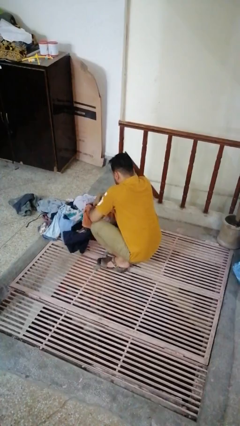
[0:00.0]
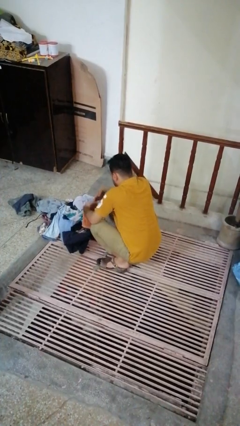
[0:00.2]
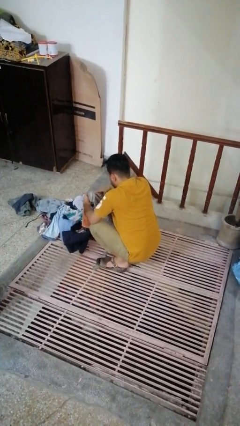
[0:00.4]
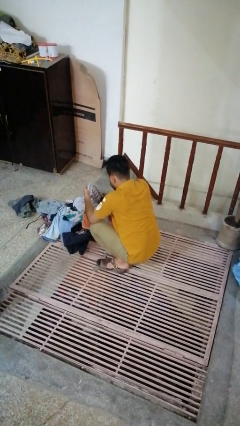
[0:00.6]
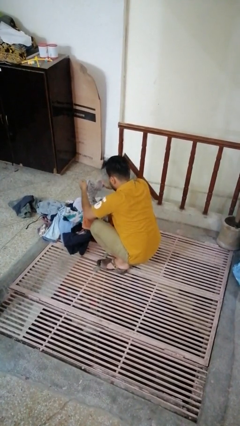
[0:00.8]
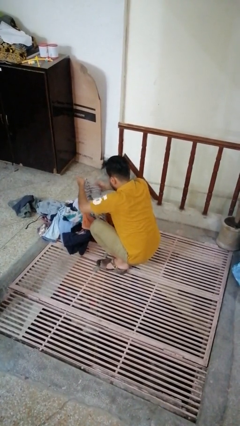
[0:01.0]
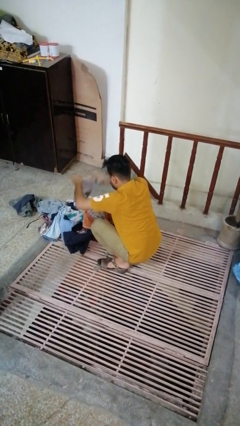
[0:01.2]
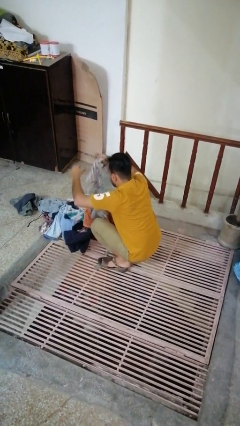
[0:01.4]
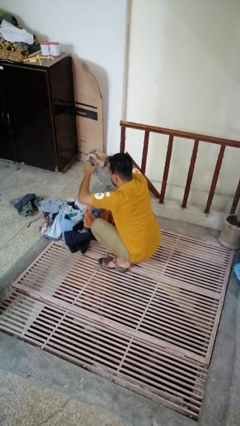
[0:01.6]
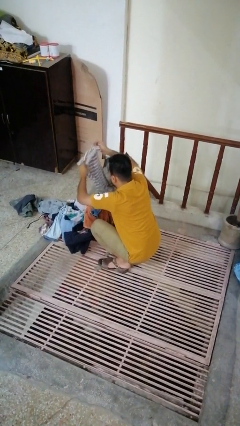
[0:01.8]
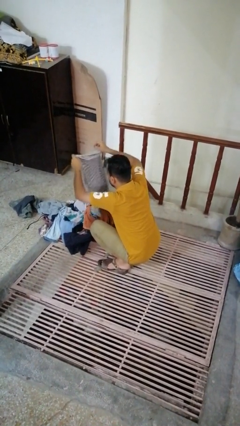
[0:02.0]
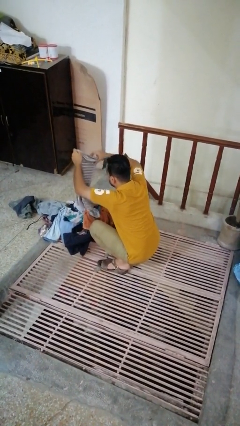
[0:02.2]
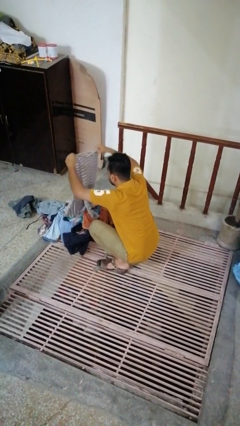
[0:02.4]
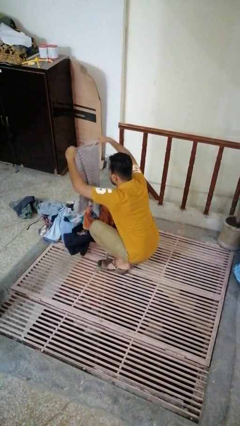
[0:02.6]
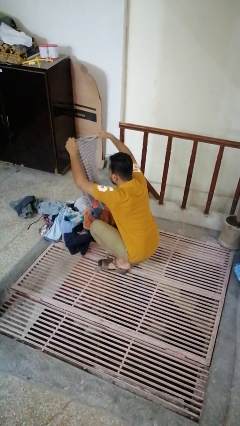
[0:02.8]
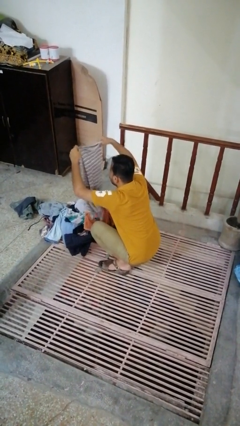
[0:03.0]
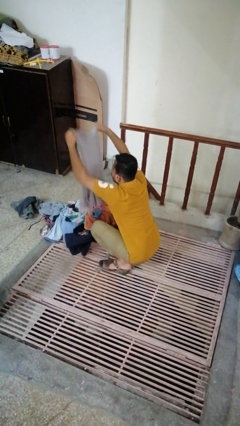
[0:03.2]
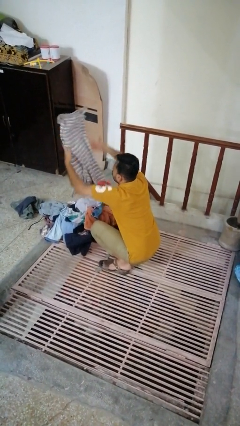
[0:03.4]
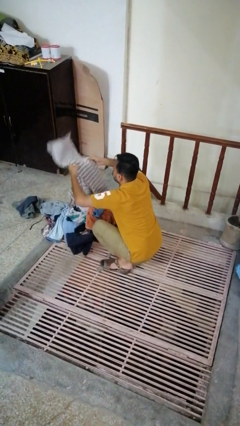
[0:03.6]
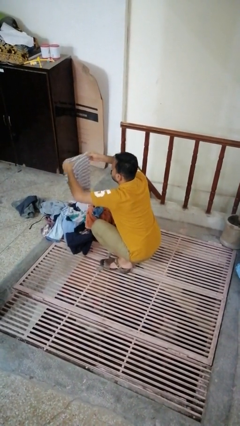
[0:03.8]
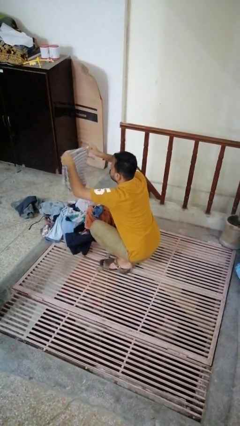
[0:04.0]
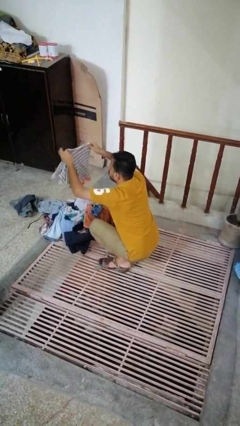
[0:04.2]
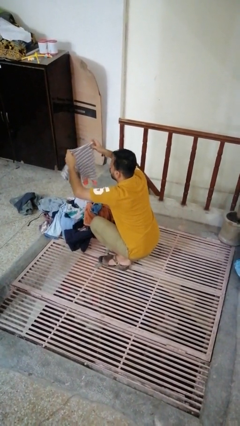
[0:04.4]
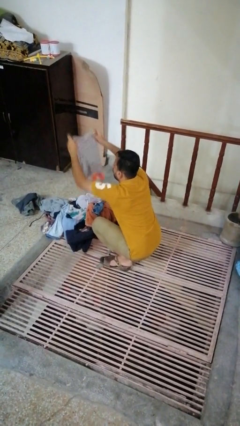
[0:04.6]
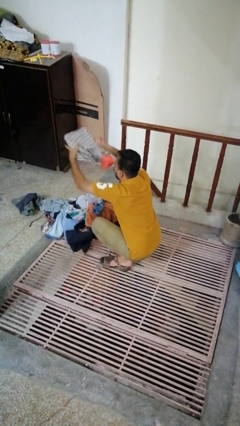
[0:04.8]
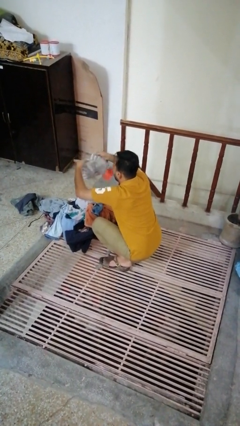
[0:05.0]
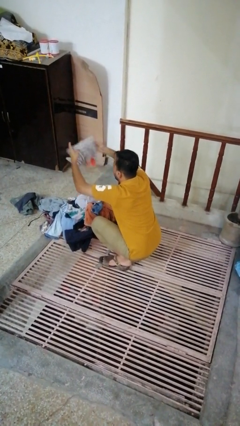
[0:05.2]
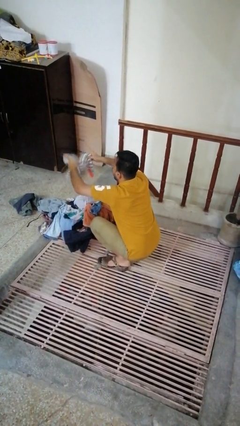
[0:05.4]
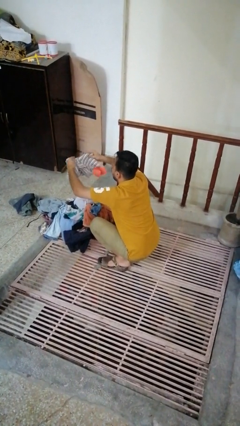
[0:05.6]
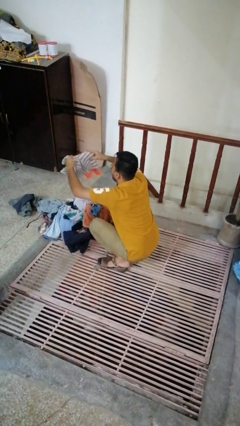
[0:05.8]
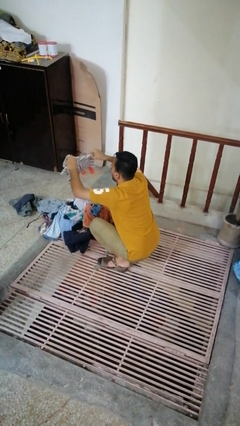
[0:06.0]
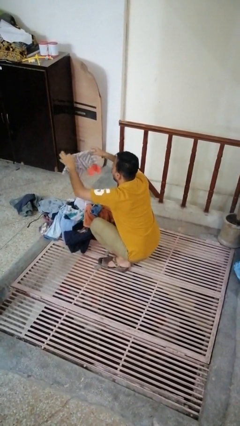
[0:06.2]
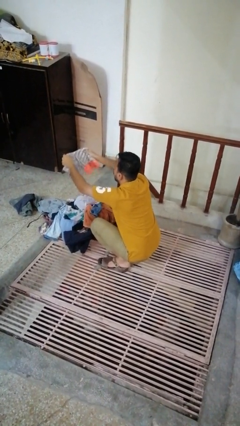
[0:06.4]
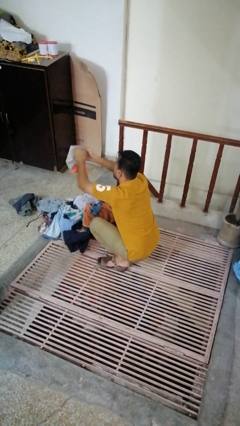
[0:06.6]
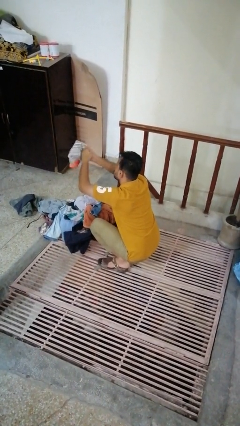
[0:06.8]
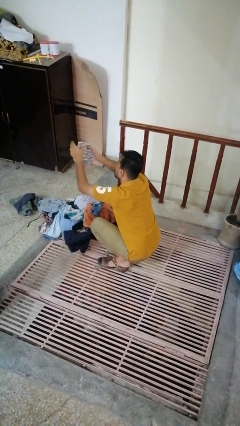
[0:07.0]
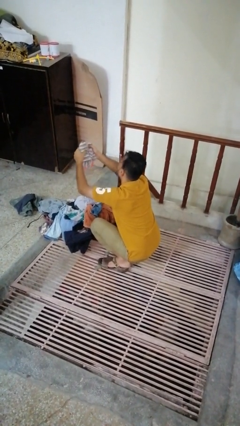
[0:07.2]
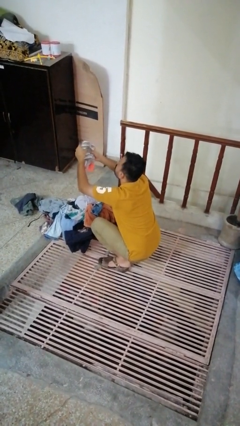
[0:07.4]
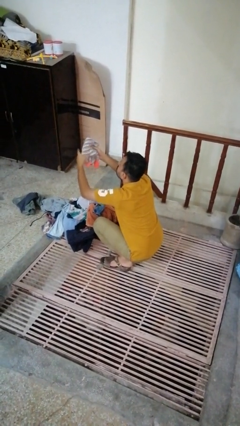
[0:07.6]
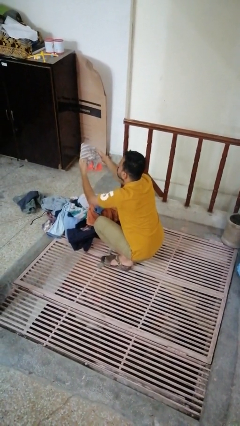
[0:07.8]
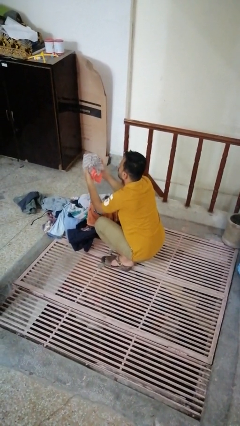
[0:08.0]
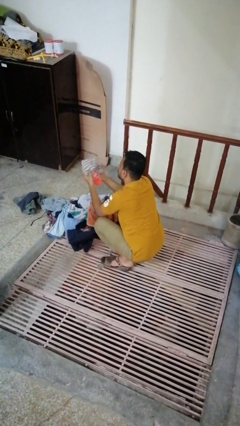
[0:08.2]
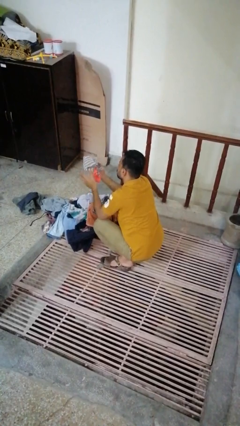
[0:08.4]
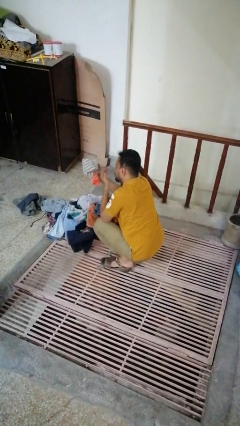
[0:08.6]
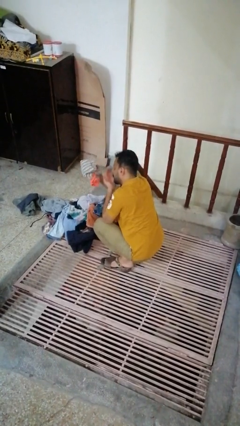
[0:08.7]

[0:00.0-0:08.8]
person folds shirt

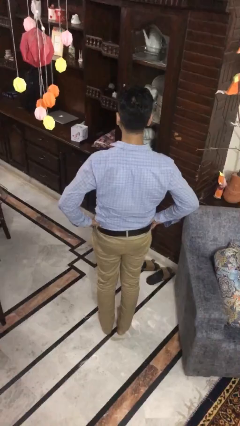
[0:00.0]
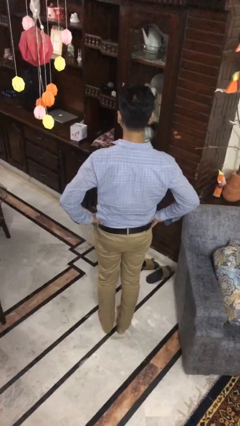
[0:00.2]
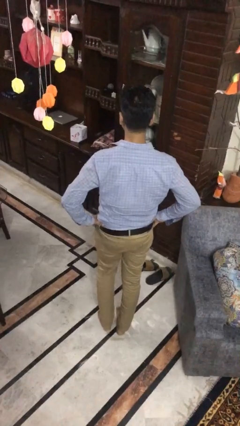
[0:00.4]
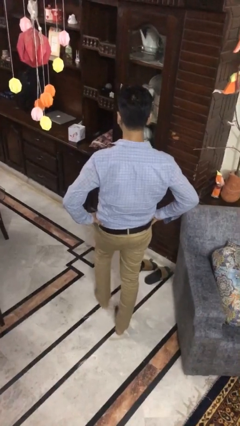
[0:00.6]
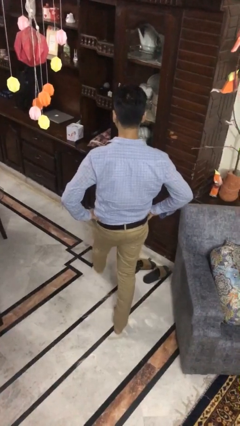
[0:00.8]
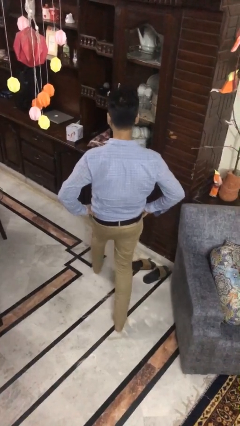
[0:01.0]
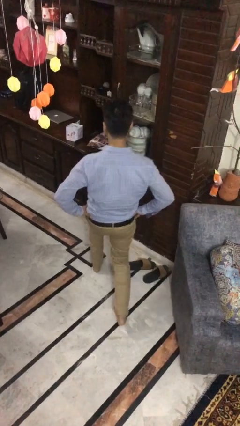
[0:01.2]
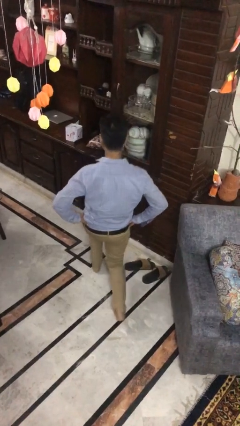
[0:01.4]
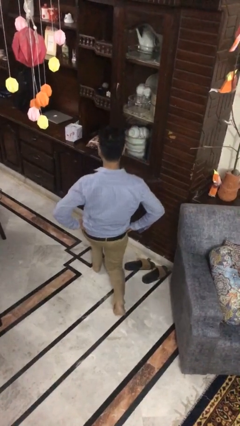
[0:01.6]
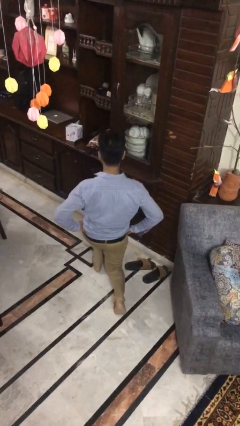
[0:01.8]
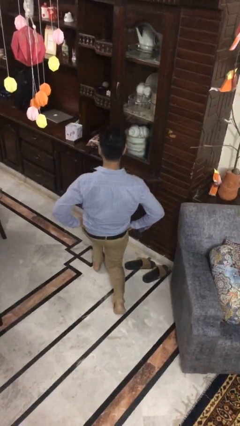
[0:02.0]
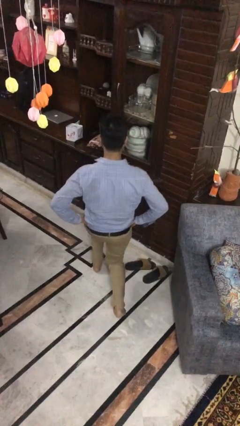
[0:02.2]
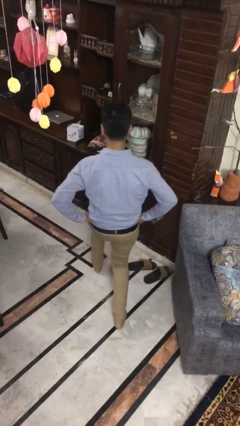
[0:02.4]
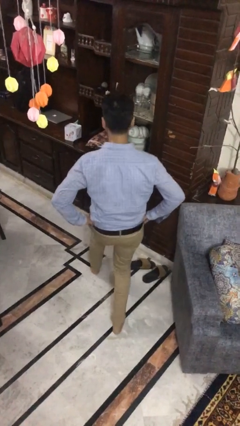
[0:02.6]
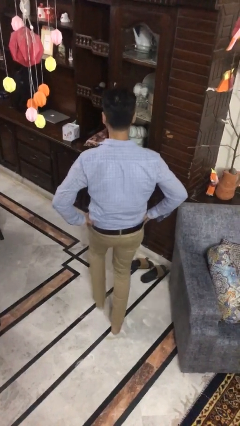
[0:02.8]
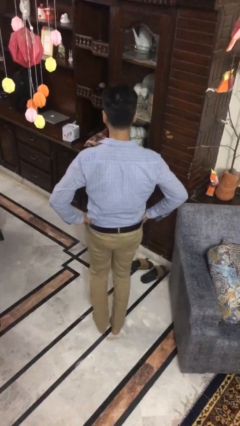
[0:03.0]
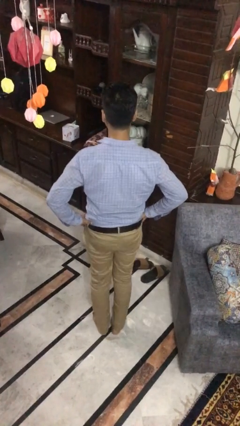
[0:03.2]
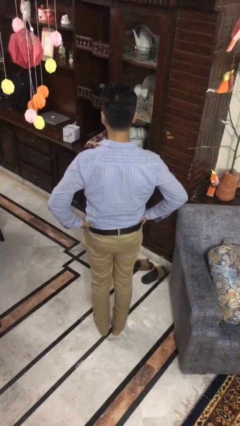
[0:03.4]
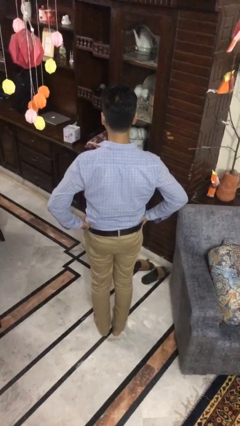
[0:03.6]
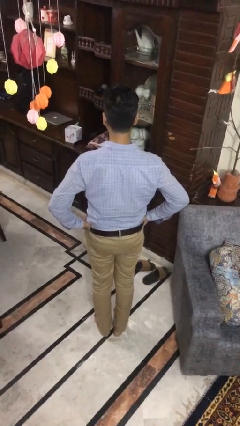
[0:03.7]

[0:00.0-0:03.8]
person exercises with lunges

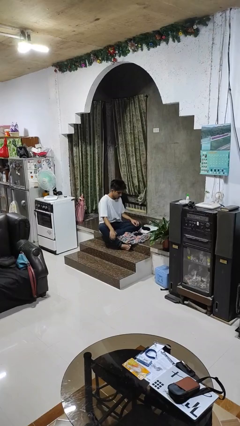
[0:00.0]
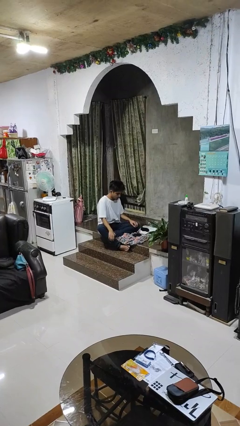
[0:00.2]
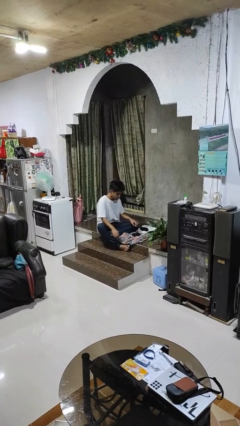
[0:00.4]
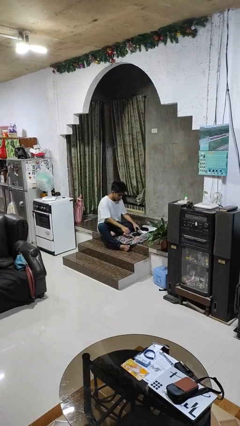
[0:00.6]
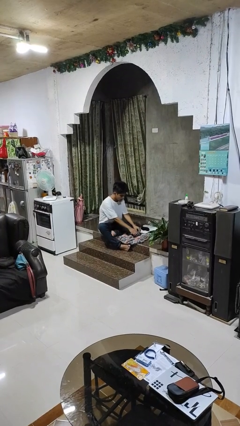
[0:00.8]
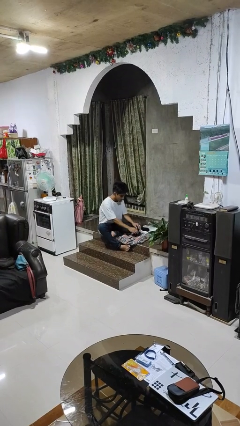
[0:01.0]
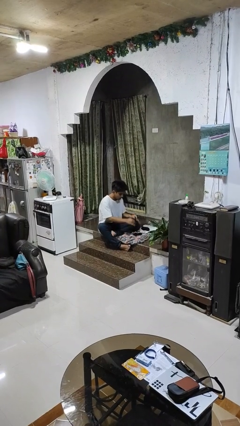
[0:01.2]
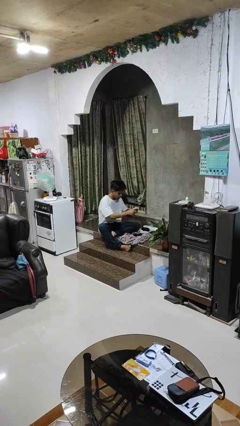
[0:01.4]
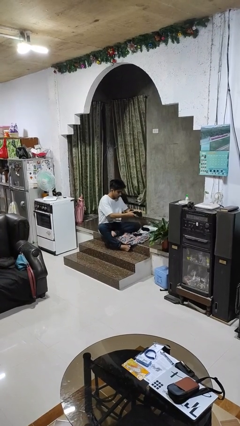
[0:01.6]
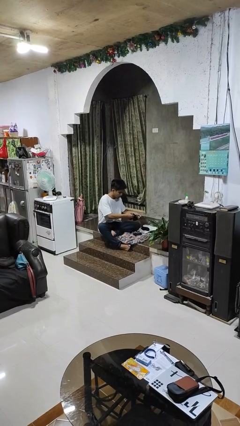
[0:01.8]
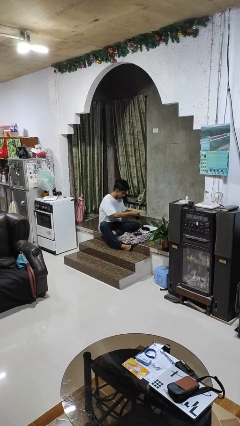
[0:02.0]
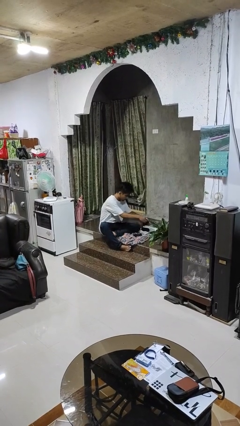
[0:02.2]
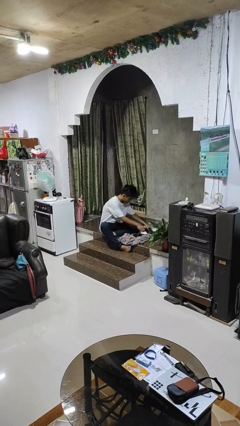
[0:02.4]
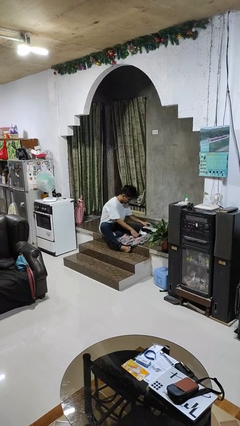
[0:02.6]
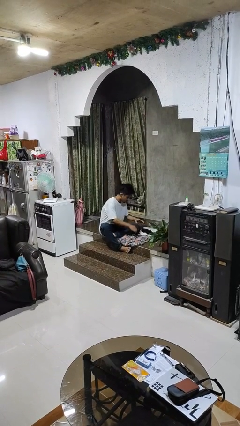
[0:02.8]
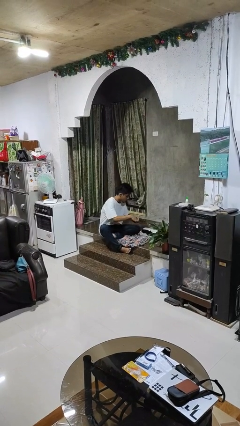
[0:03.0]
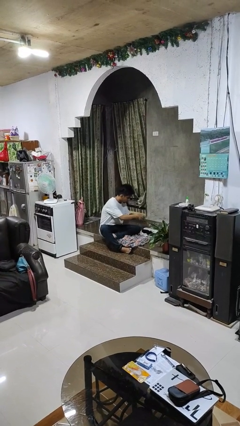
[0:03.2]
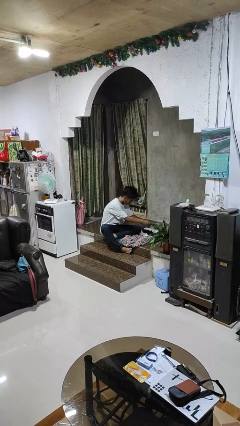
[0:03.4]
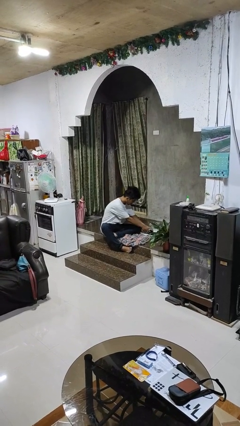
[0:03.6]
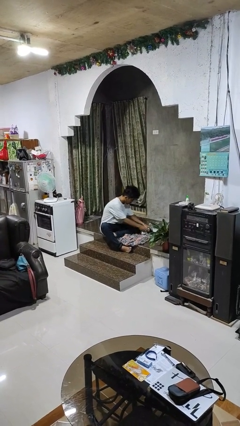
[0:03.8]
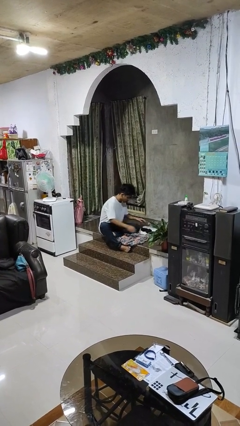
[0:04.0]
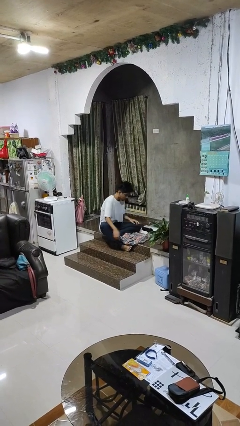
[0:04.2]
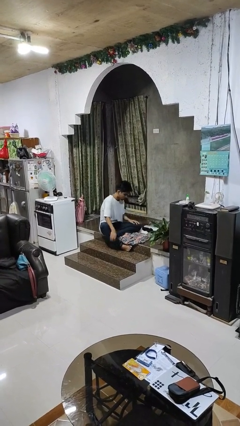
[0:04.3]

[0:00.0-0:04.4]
person folds socks

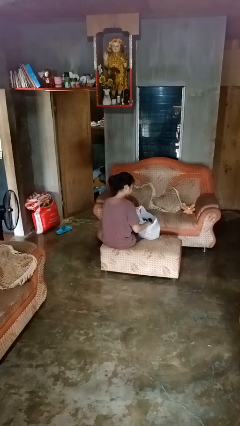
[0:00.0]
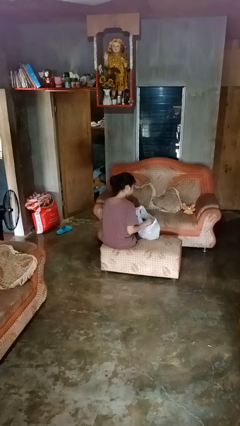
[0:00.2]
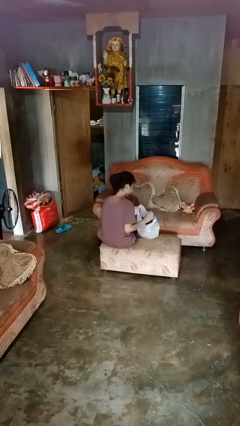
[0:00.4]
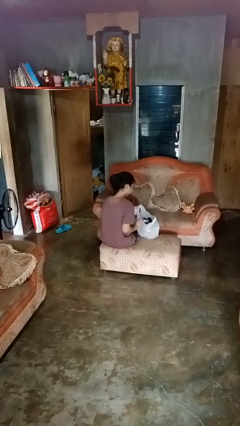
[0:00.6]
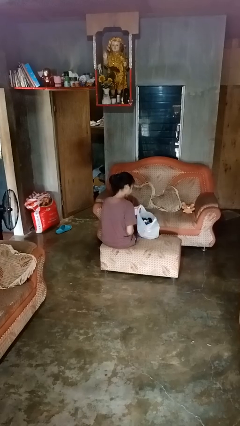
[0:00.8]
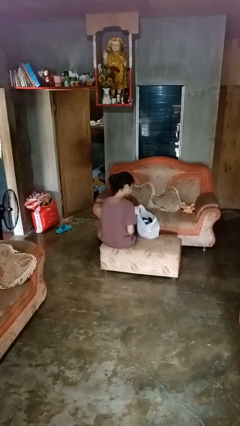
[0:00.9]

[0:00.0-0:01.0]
person puts object into bag
